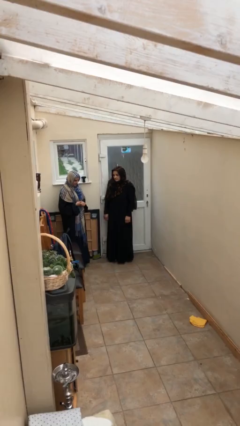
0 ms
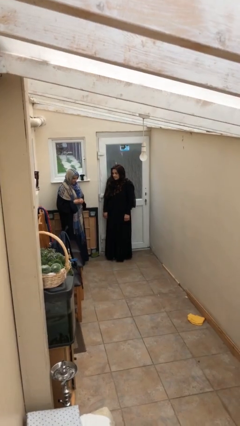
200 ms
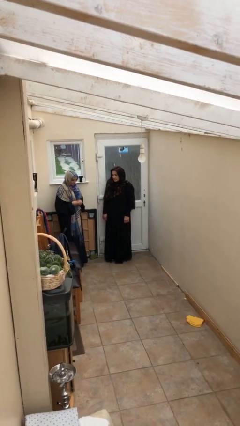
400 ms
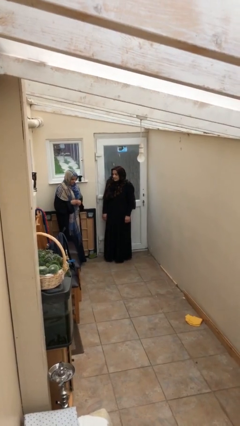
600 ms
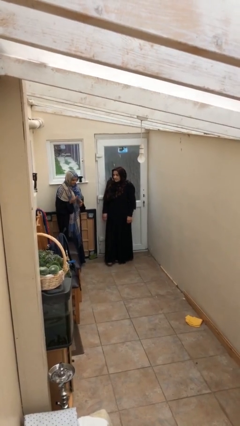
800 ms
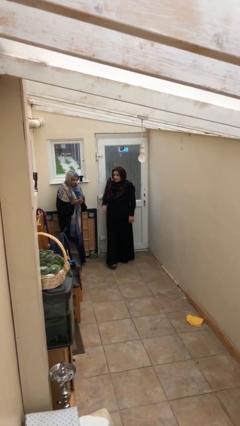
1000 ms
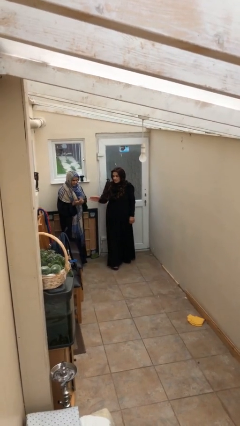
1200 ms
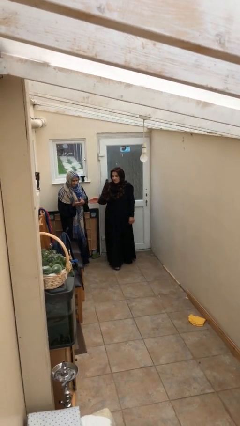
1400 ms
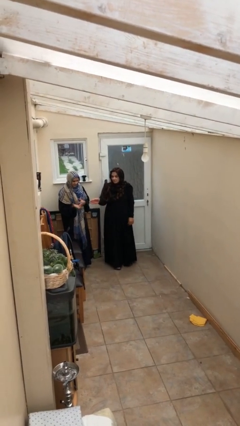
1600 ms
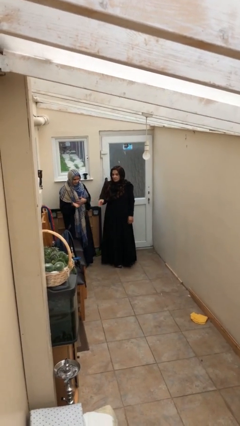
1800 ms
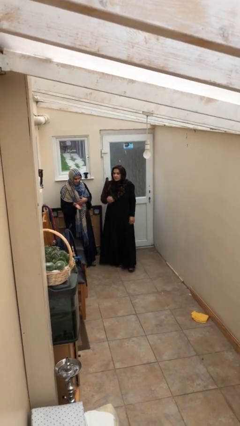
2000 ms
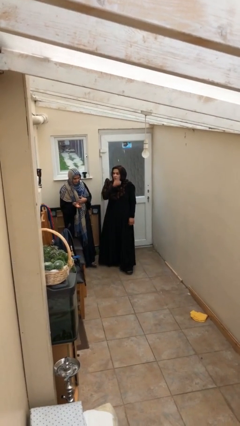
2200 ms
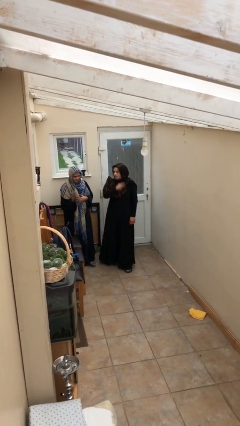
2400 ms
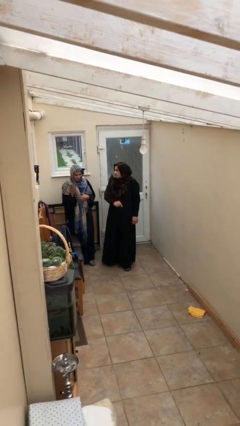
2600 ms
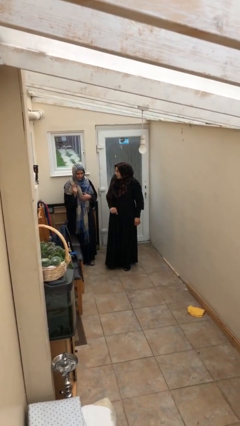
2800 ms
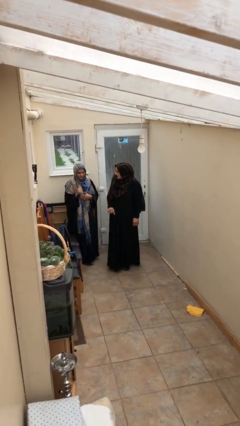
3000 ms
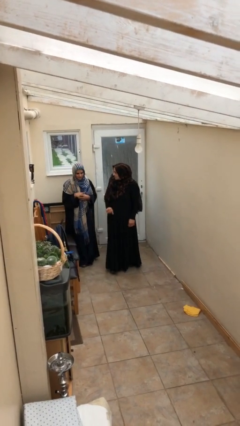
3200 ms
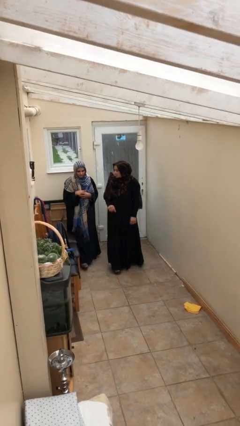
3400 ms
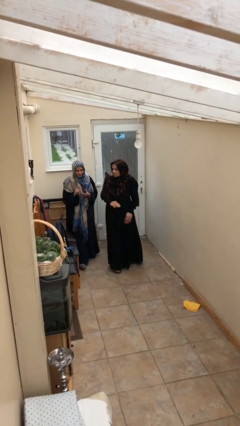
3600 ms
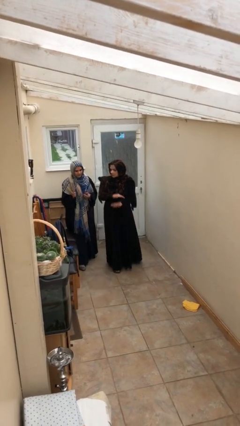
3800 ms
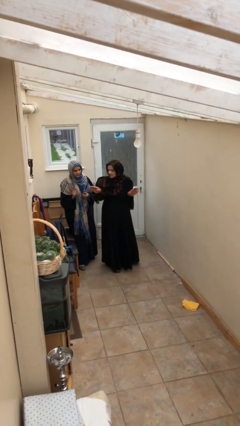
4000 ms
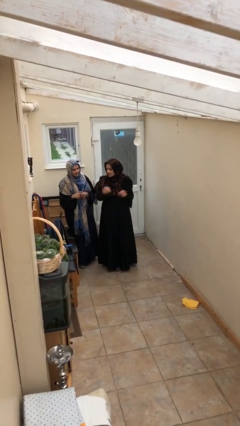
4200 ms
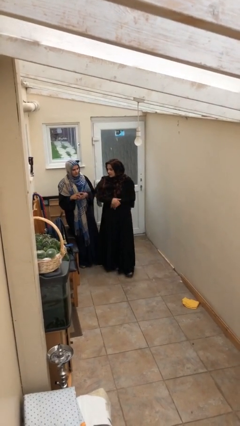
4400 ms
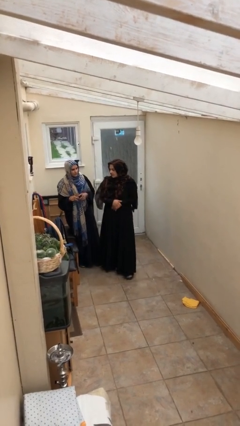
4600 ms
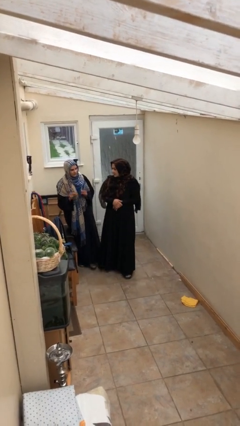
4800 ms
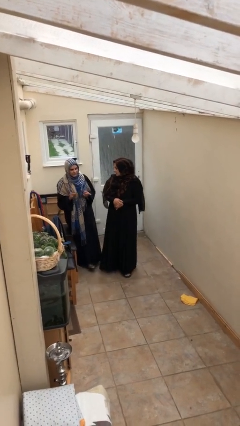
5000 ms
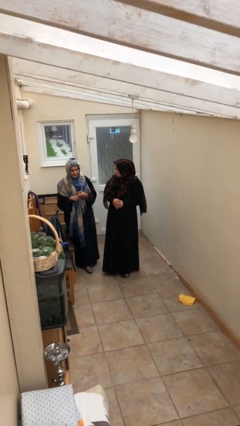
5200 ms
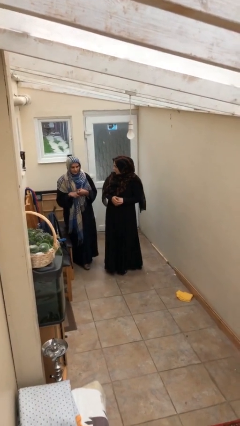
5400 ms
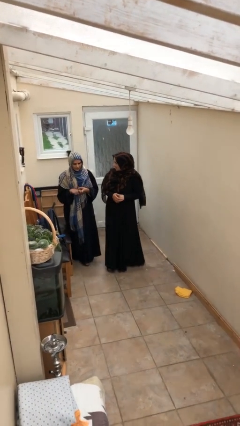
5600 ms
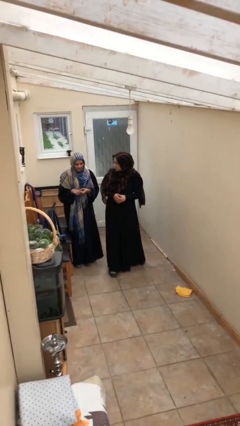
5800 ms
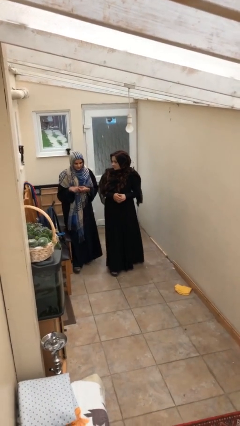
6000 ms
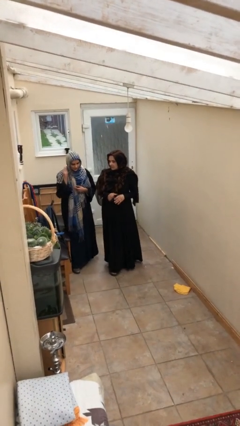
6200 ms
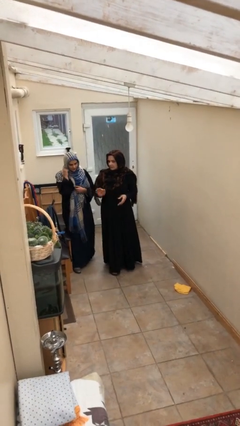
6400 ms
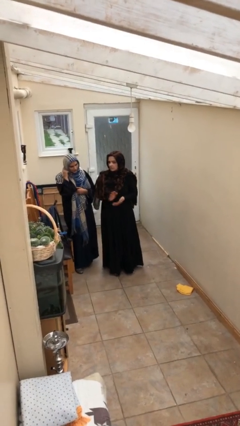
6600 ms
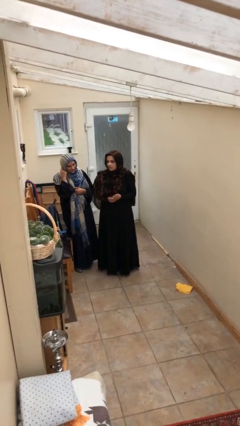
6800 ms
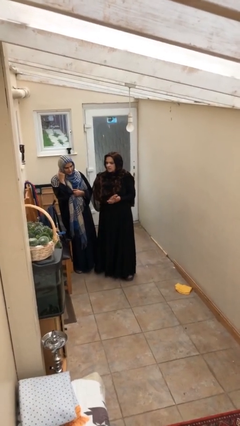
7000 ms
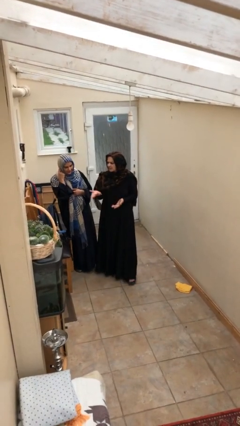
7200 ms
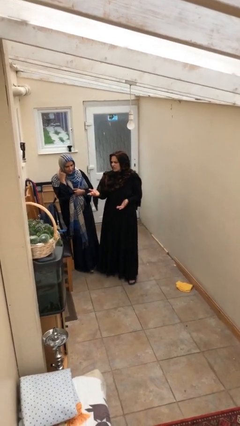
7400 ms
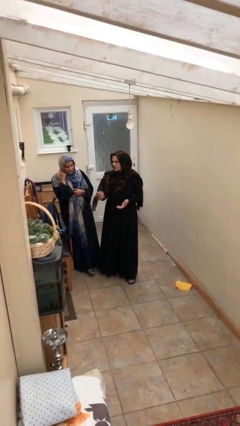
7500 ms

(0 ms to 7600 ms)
person talks to person

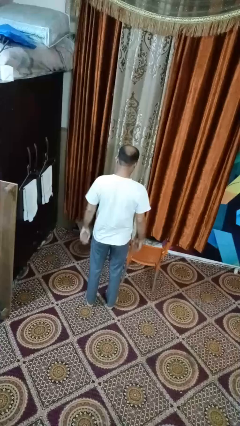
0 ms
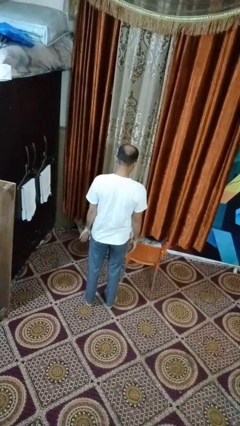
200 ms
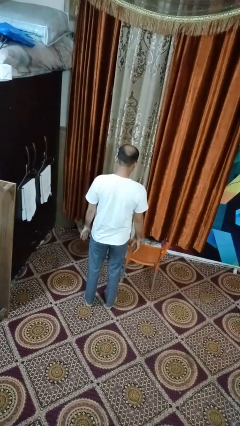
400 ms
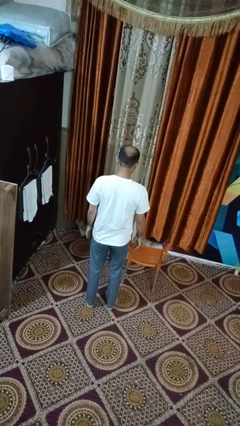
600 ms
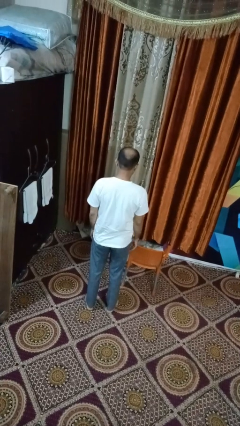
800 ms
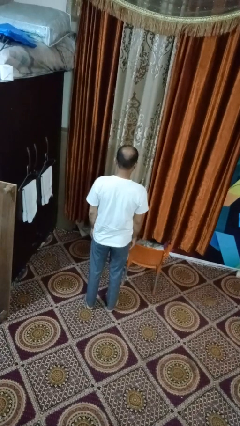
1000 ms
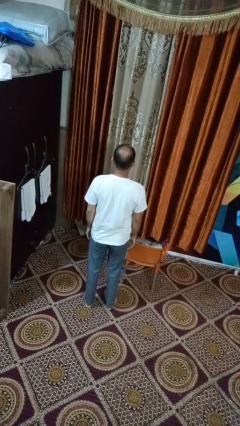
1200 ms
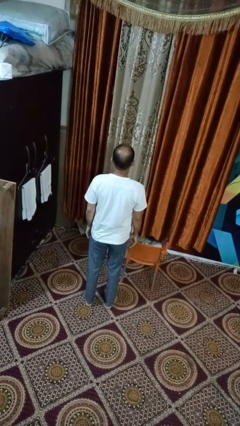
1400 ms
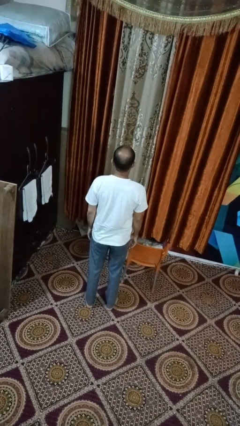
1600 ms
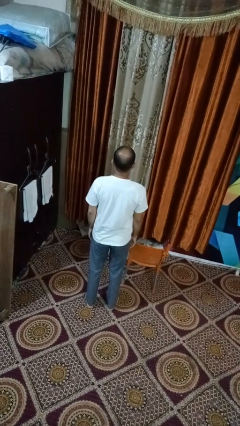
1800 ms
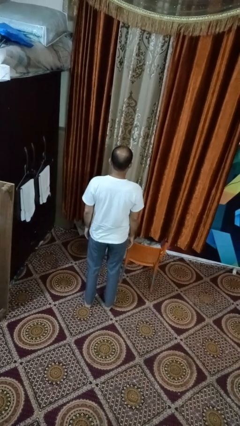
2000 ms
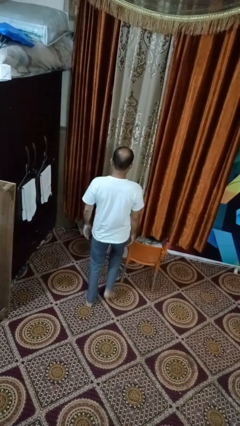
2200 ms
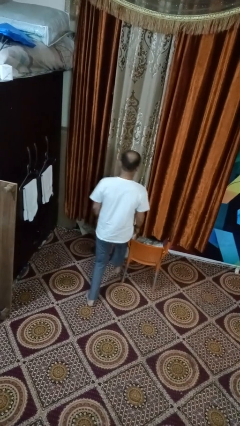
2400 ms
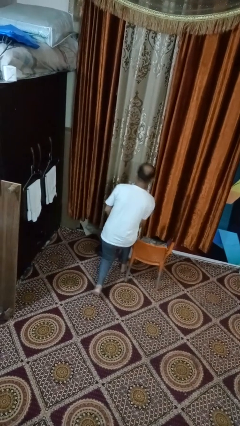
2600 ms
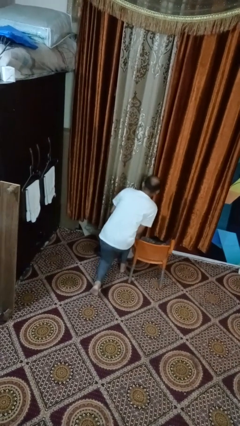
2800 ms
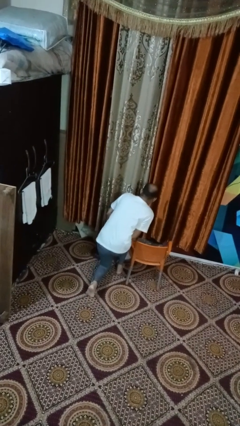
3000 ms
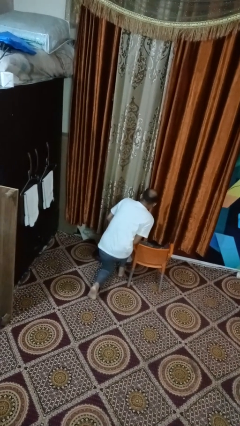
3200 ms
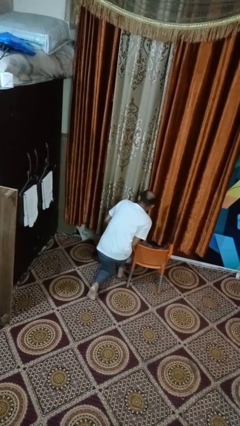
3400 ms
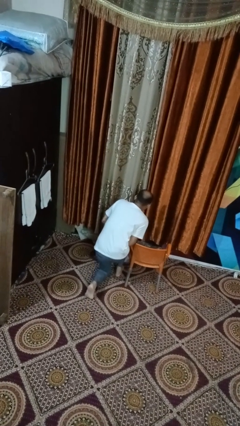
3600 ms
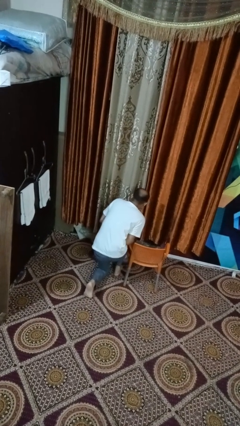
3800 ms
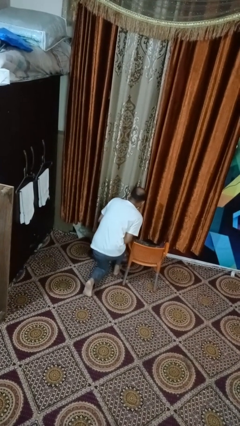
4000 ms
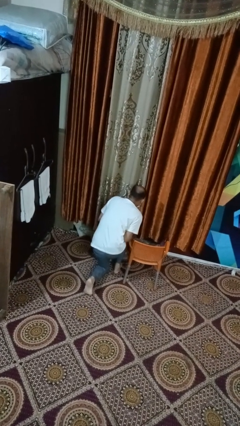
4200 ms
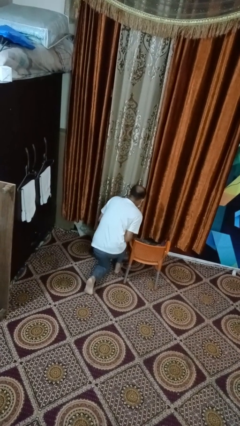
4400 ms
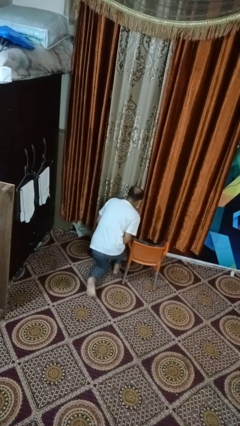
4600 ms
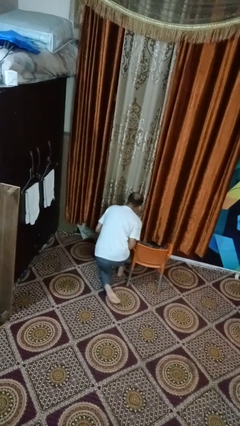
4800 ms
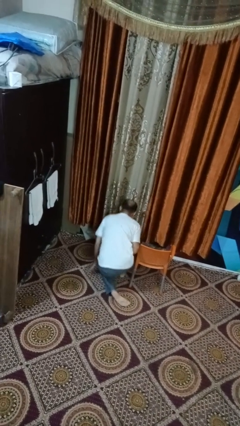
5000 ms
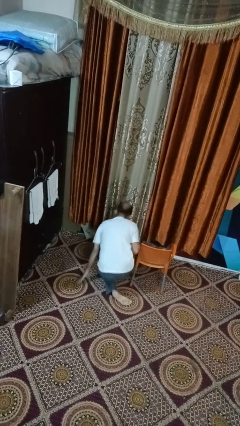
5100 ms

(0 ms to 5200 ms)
person trips on object on floor

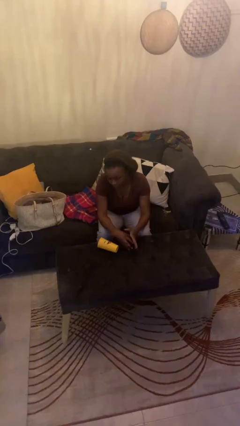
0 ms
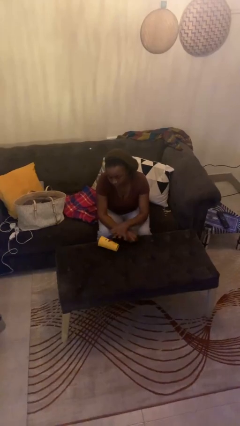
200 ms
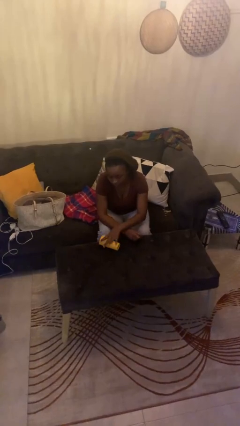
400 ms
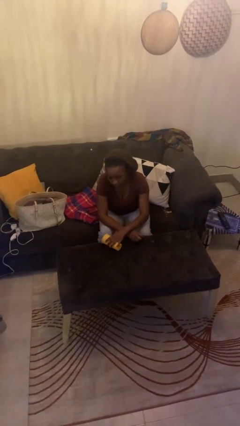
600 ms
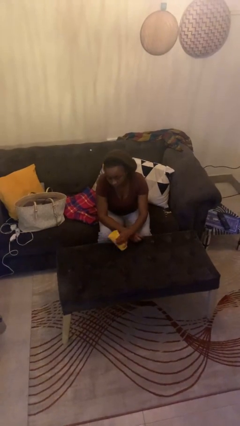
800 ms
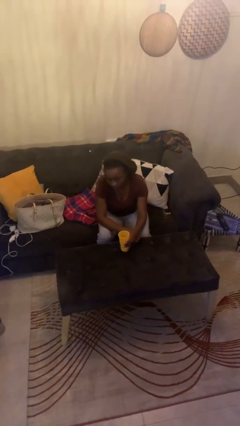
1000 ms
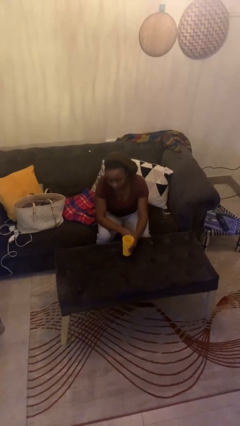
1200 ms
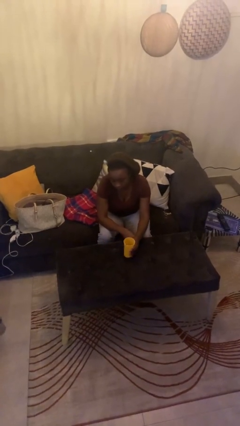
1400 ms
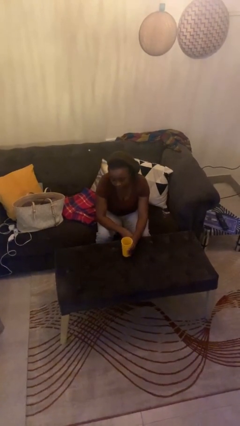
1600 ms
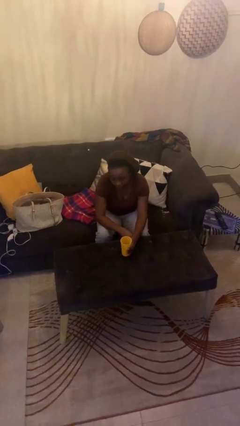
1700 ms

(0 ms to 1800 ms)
person sets upright glass

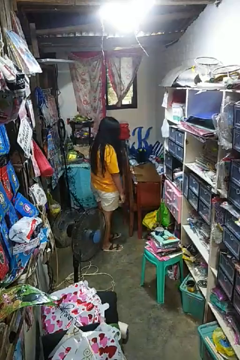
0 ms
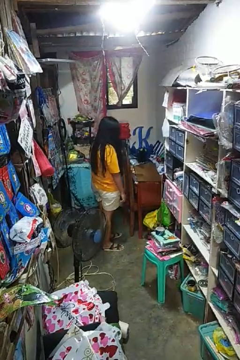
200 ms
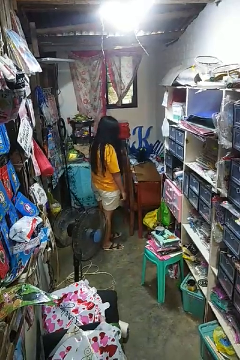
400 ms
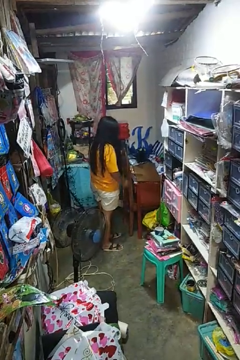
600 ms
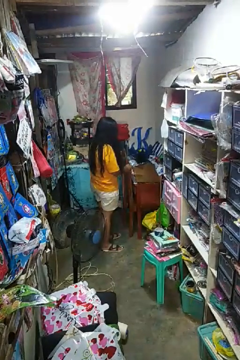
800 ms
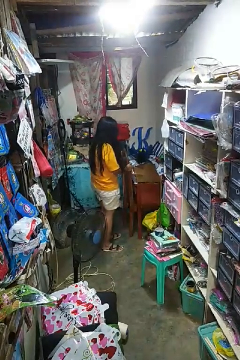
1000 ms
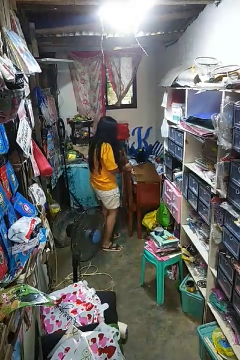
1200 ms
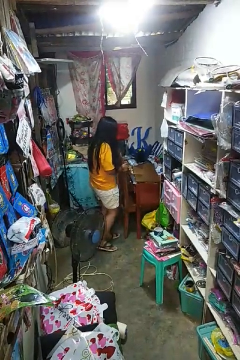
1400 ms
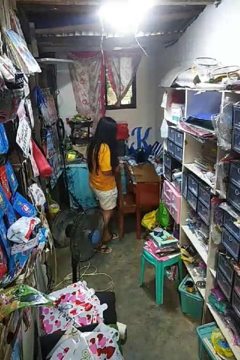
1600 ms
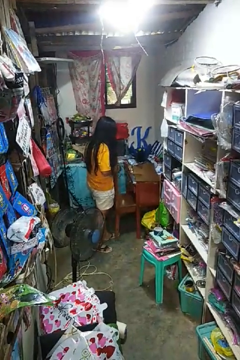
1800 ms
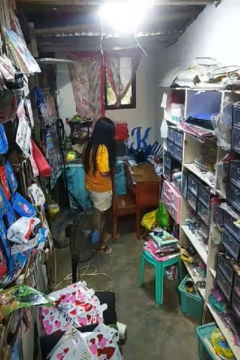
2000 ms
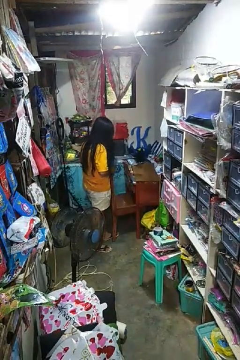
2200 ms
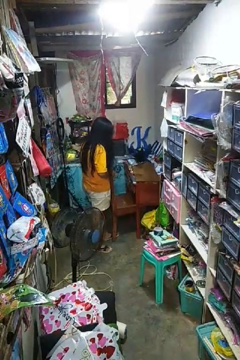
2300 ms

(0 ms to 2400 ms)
person pulls out chair

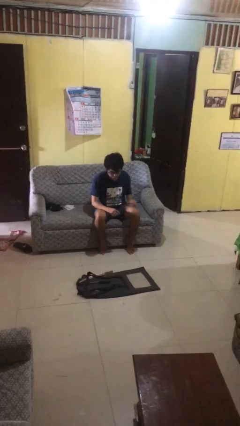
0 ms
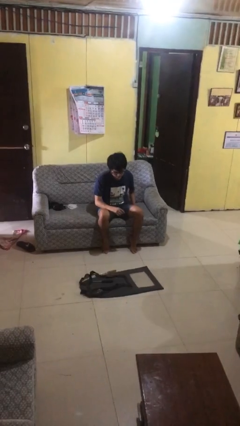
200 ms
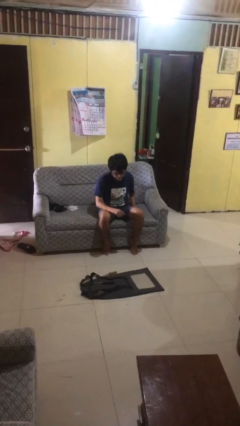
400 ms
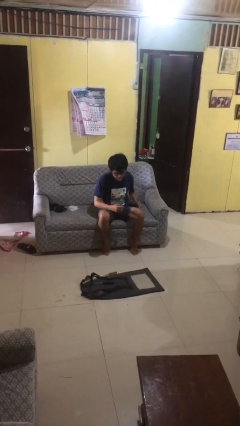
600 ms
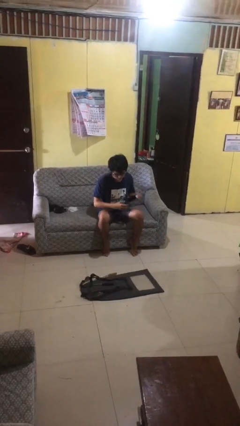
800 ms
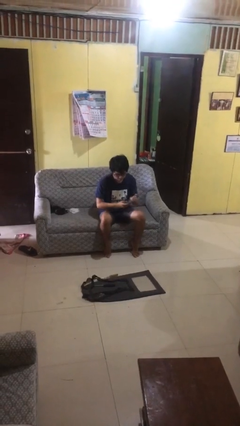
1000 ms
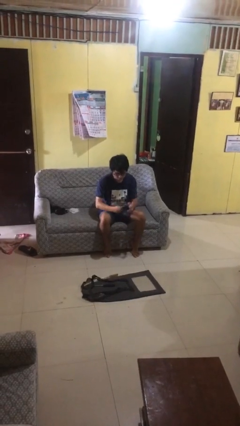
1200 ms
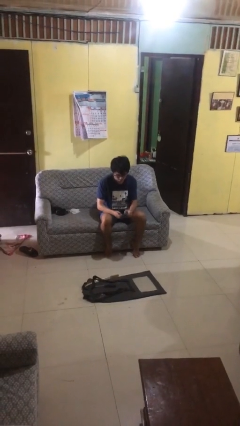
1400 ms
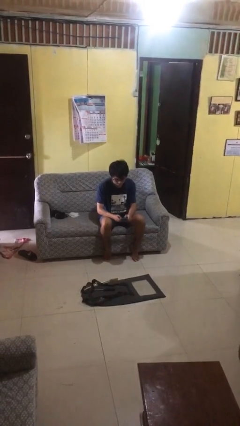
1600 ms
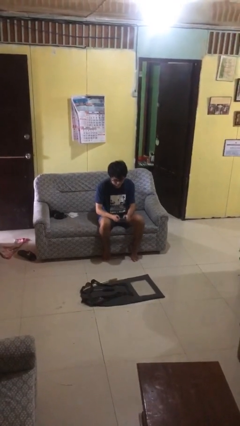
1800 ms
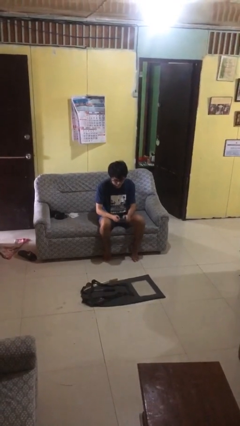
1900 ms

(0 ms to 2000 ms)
person takes phone from pocket
